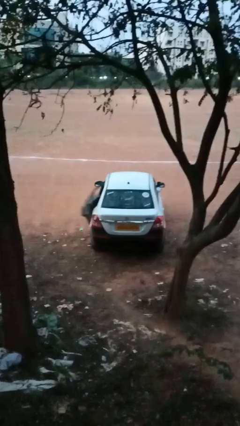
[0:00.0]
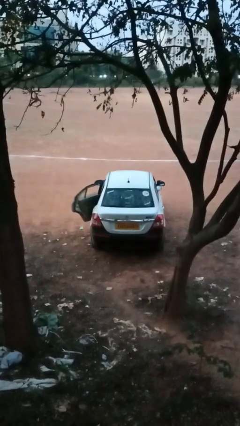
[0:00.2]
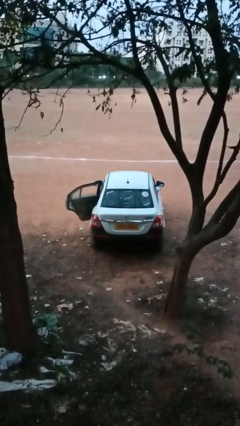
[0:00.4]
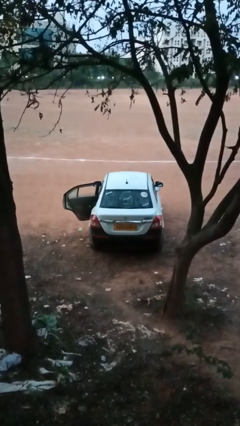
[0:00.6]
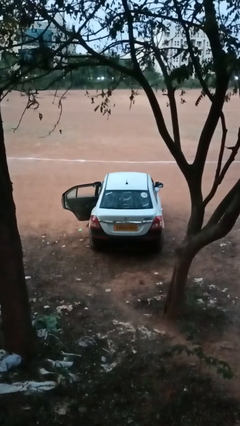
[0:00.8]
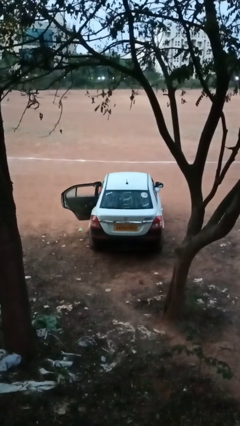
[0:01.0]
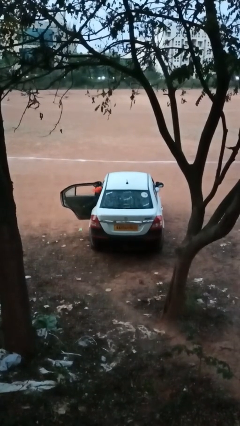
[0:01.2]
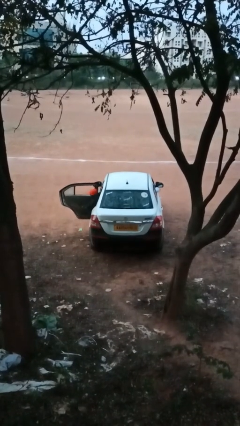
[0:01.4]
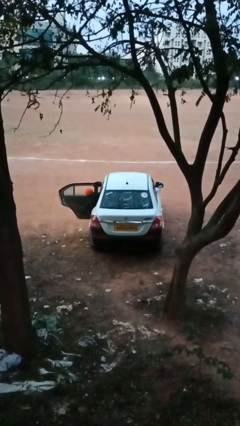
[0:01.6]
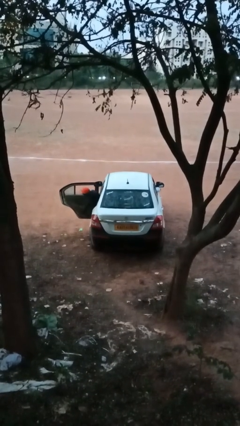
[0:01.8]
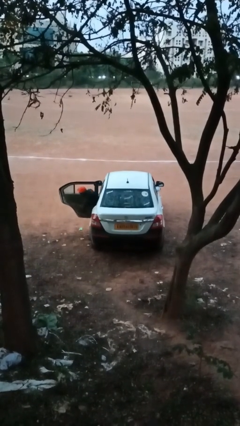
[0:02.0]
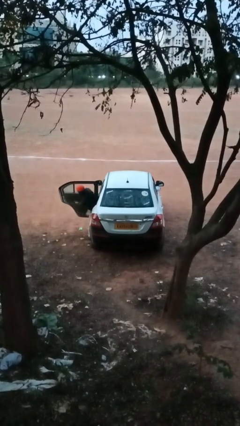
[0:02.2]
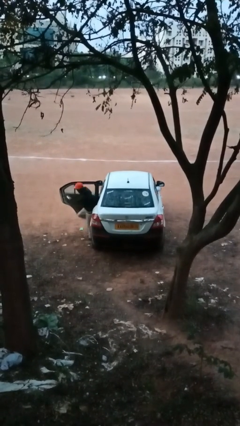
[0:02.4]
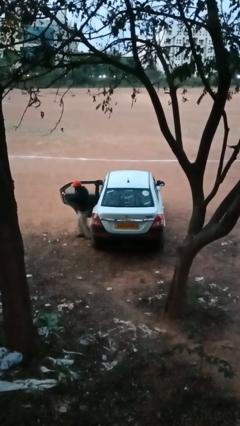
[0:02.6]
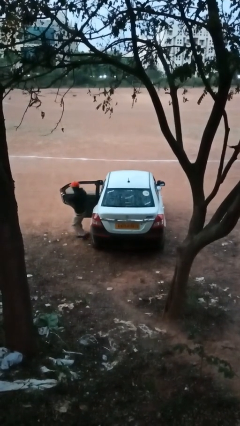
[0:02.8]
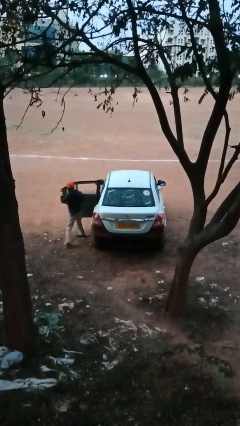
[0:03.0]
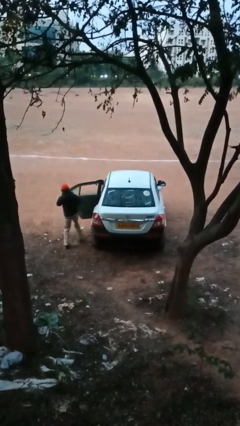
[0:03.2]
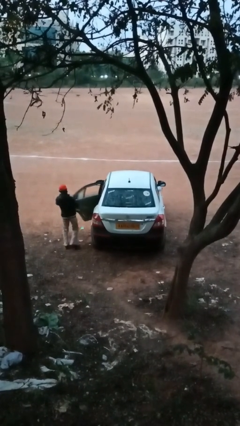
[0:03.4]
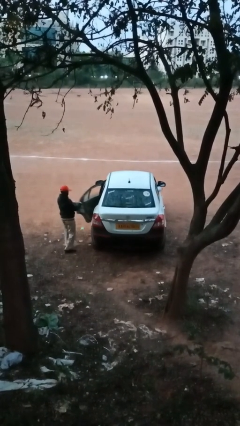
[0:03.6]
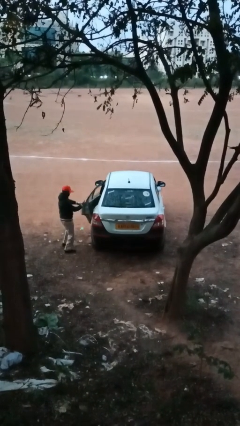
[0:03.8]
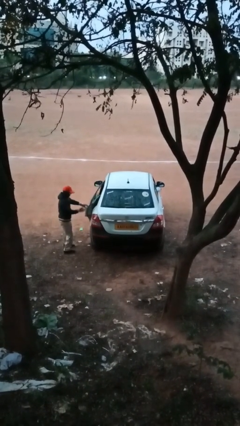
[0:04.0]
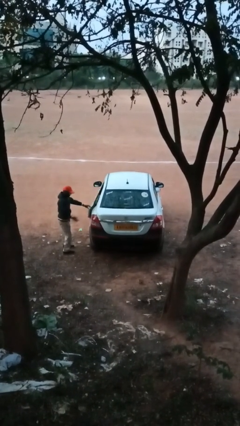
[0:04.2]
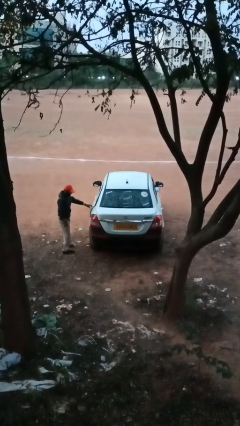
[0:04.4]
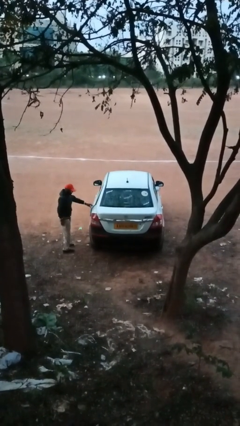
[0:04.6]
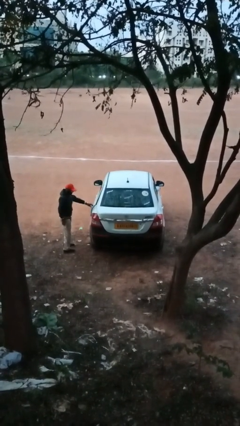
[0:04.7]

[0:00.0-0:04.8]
car drops off person

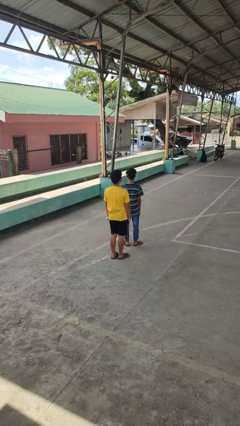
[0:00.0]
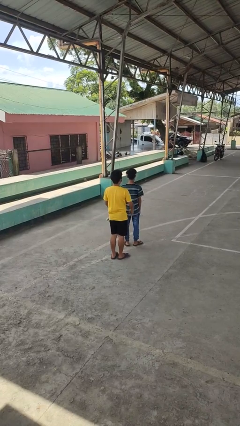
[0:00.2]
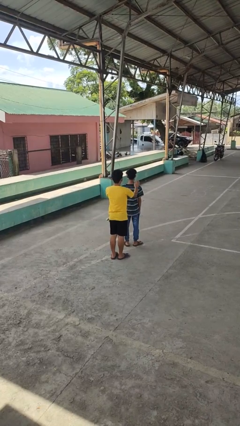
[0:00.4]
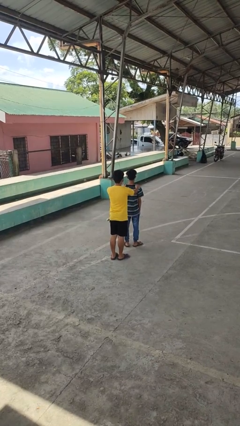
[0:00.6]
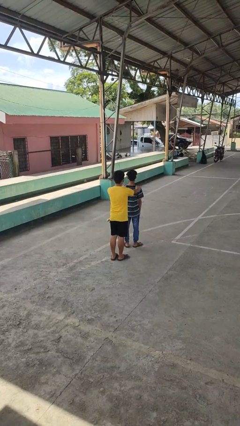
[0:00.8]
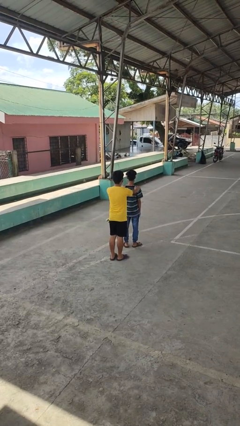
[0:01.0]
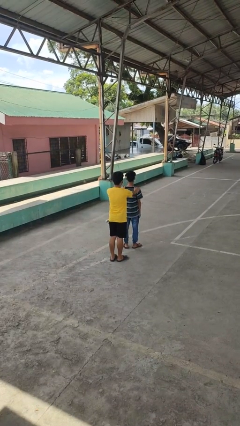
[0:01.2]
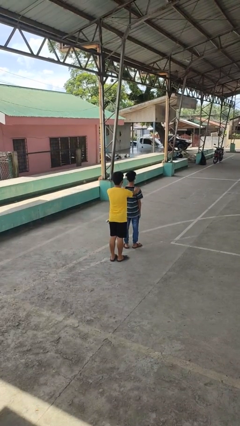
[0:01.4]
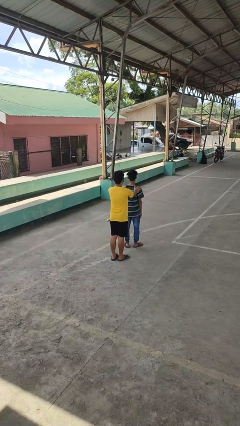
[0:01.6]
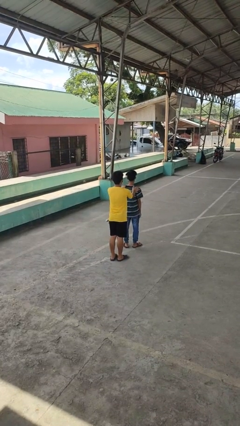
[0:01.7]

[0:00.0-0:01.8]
person grabs person by shoulder

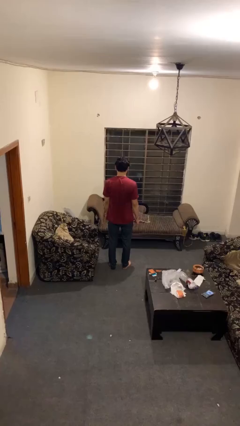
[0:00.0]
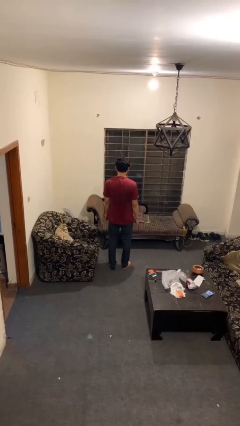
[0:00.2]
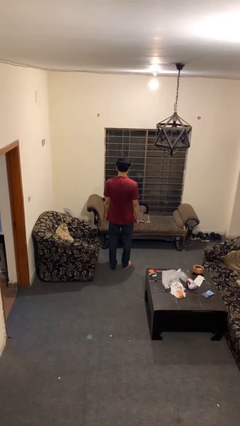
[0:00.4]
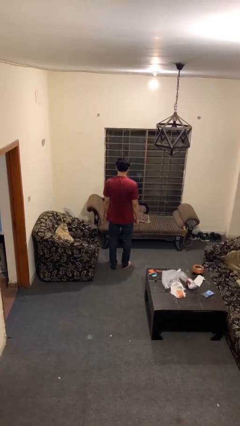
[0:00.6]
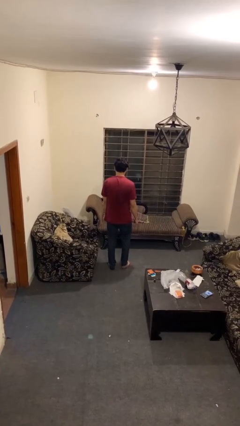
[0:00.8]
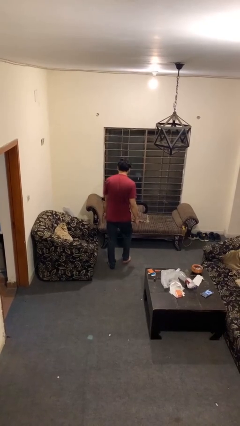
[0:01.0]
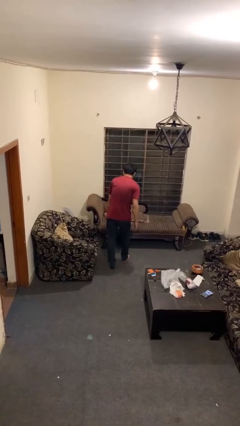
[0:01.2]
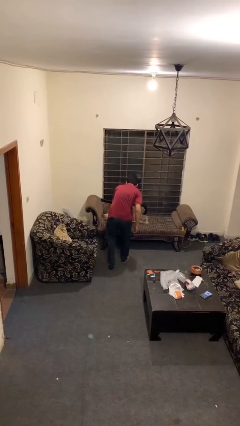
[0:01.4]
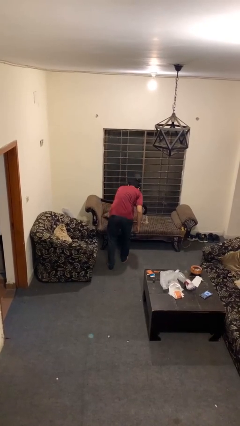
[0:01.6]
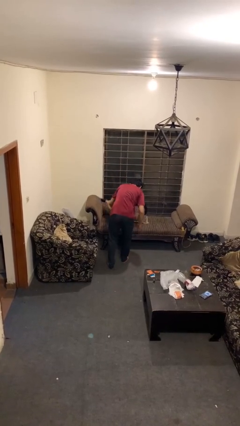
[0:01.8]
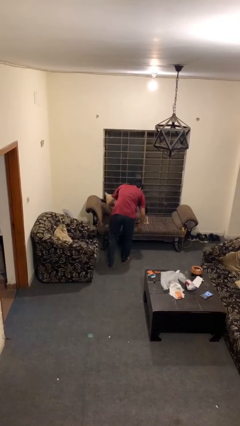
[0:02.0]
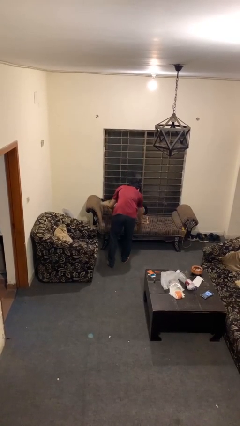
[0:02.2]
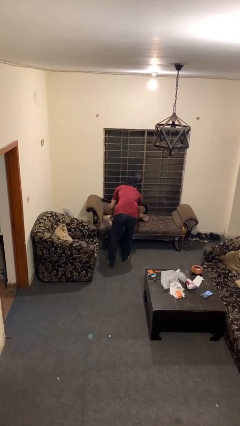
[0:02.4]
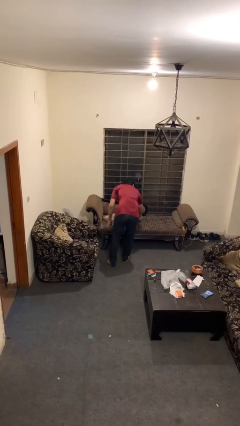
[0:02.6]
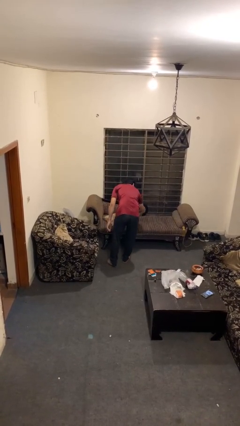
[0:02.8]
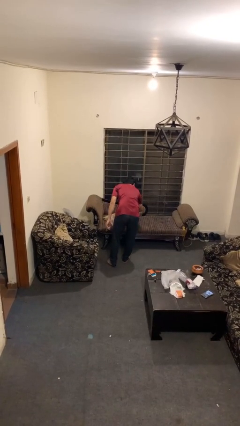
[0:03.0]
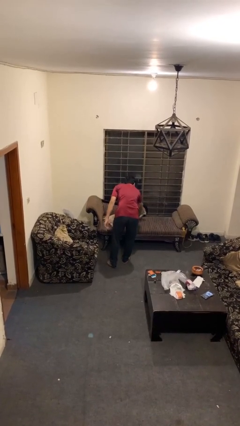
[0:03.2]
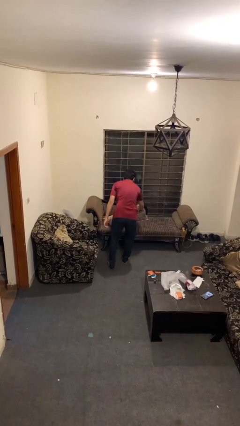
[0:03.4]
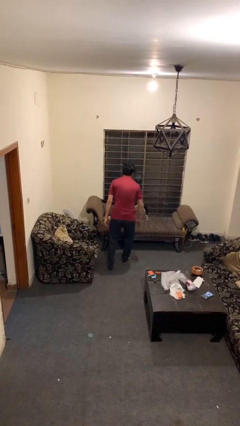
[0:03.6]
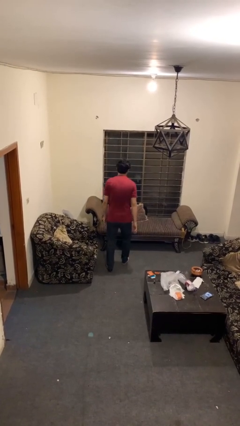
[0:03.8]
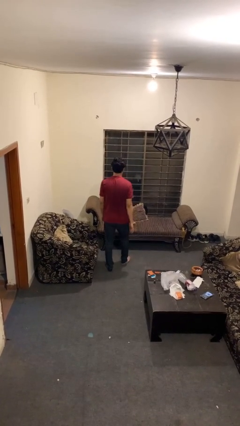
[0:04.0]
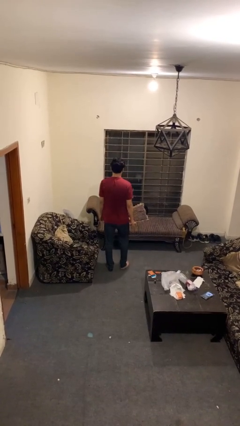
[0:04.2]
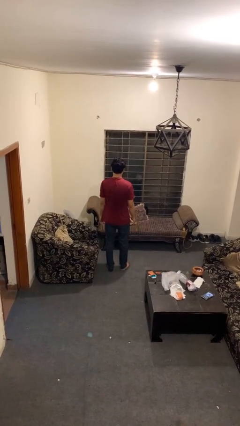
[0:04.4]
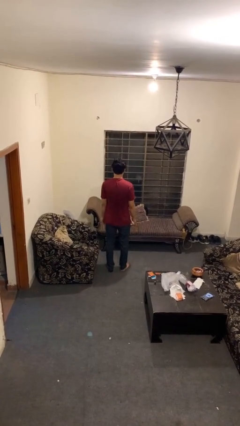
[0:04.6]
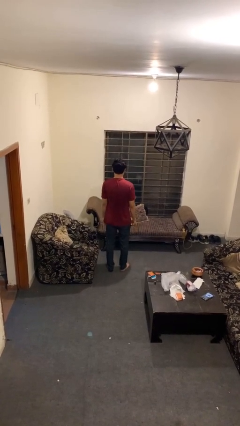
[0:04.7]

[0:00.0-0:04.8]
person searches in couch

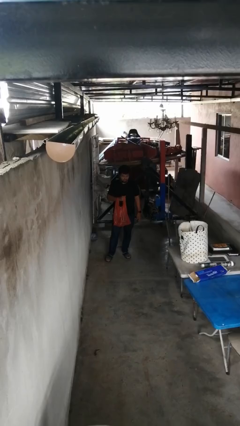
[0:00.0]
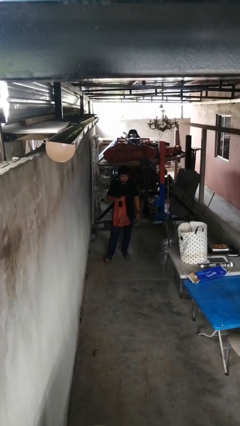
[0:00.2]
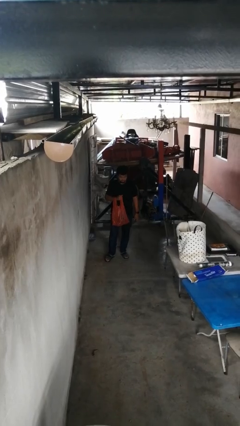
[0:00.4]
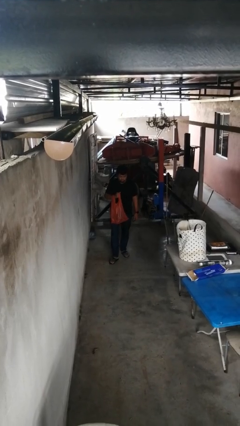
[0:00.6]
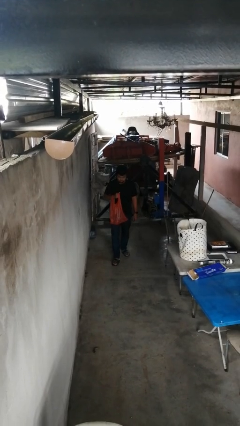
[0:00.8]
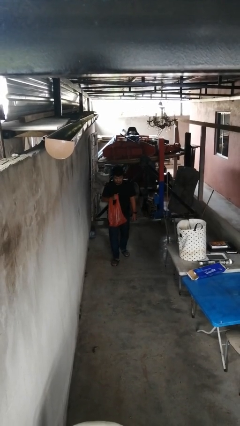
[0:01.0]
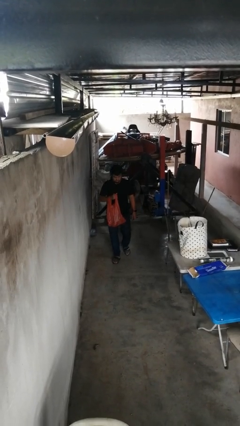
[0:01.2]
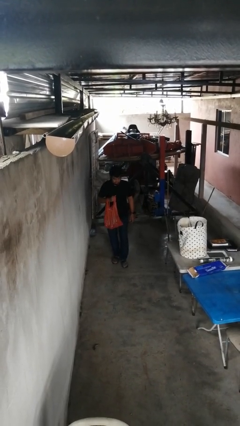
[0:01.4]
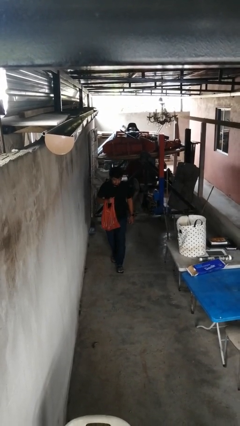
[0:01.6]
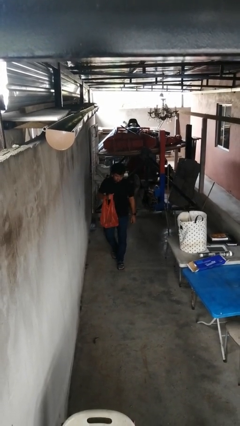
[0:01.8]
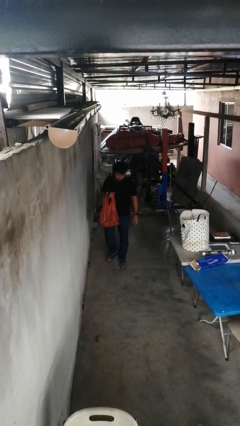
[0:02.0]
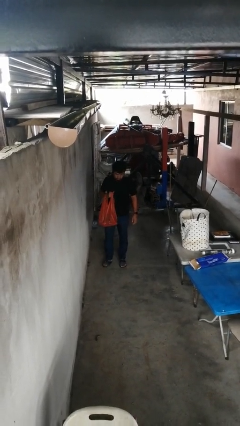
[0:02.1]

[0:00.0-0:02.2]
person carries groceries

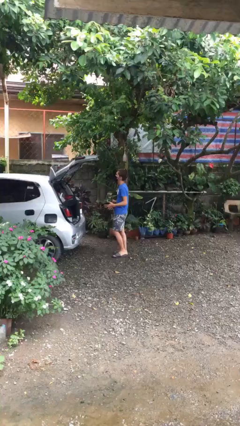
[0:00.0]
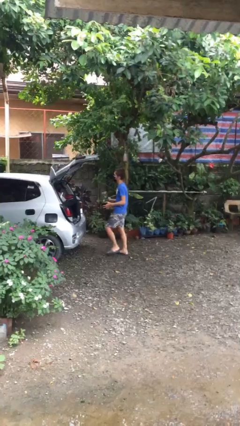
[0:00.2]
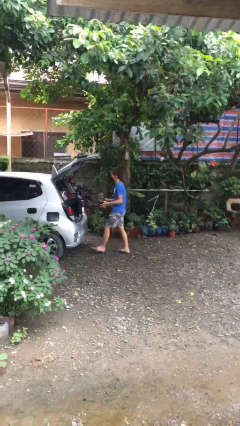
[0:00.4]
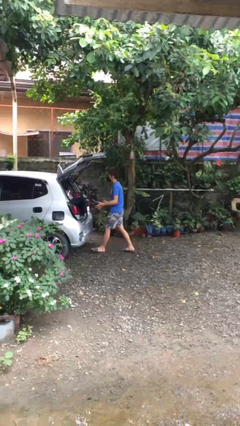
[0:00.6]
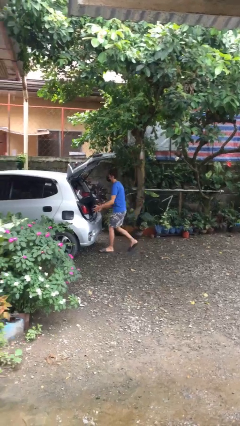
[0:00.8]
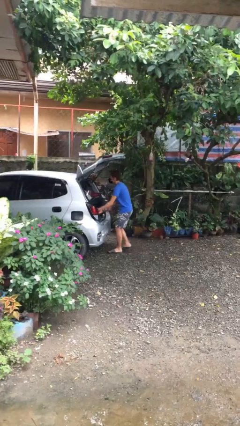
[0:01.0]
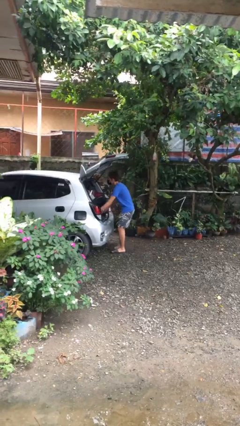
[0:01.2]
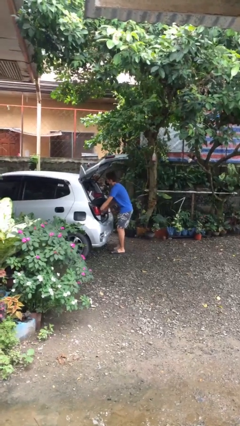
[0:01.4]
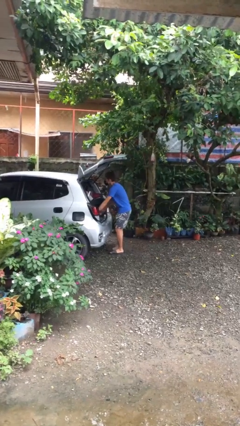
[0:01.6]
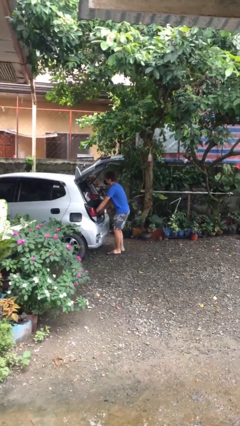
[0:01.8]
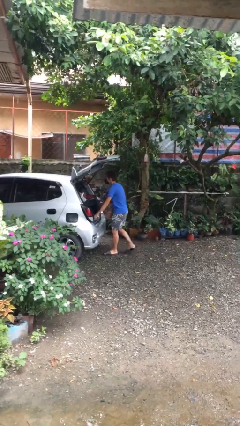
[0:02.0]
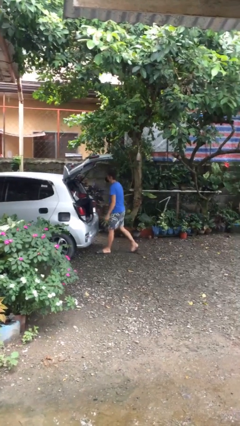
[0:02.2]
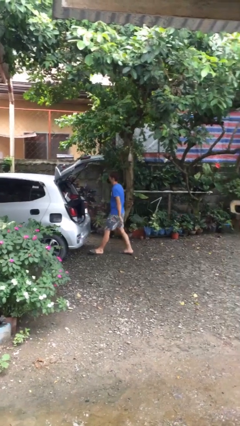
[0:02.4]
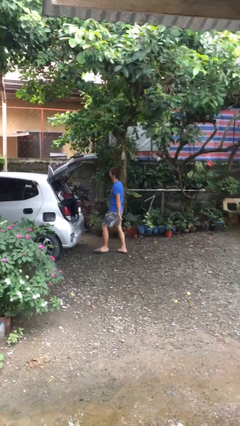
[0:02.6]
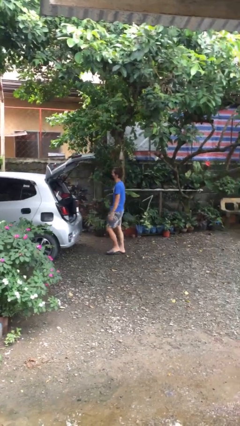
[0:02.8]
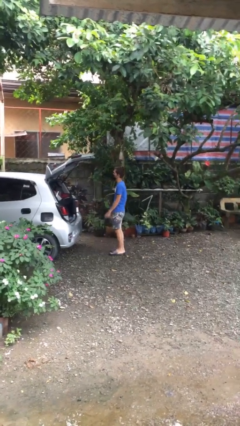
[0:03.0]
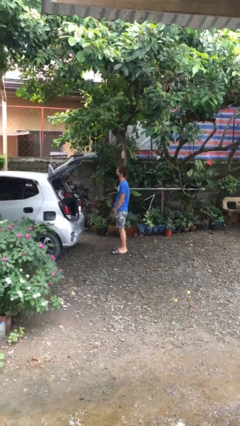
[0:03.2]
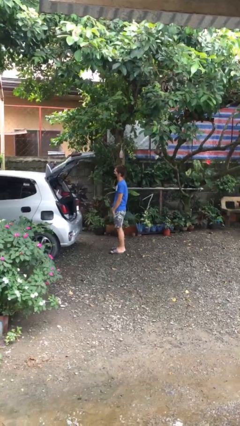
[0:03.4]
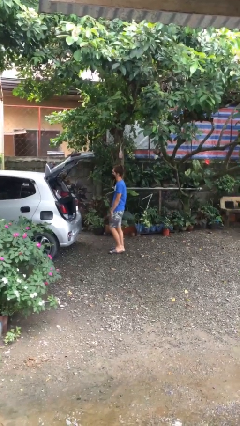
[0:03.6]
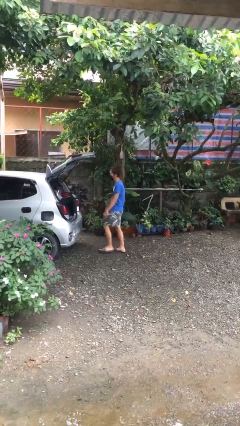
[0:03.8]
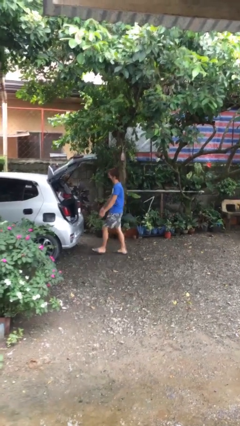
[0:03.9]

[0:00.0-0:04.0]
person loads car
